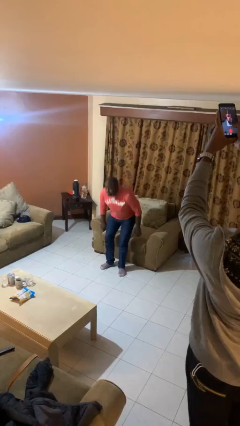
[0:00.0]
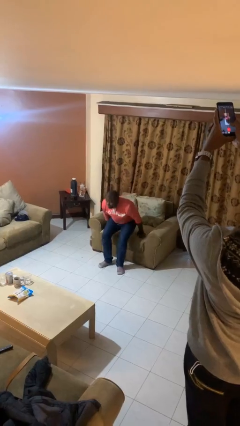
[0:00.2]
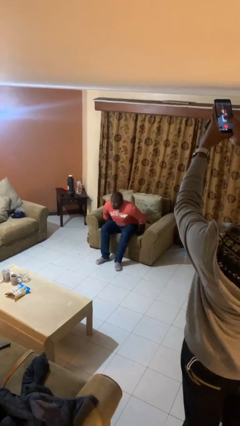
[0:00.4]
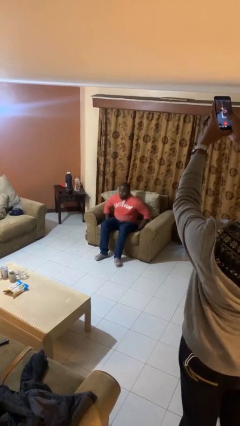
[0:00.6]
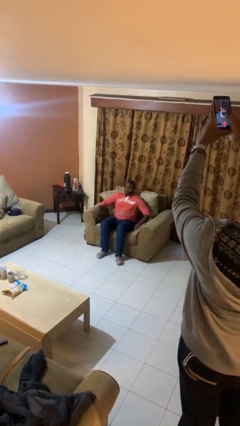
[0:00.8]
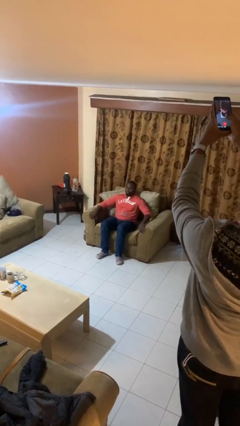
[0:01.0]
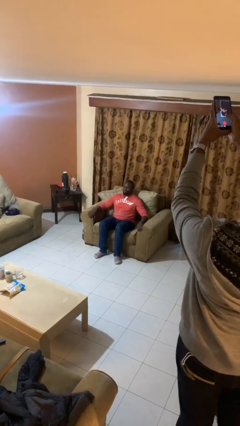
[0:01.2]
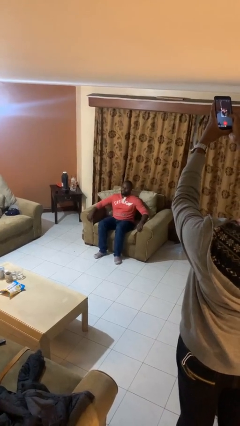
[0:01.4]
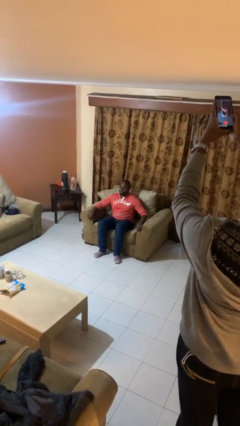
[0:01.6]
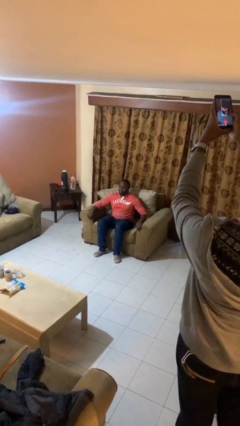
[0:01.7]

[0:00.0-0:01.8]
person sits down

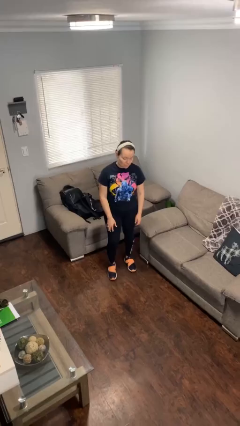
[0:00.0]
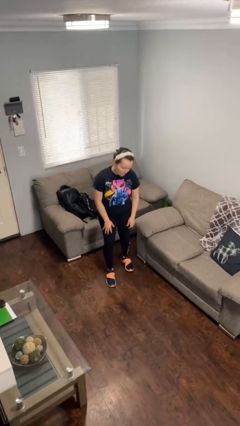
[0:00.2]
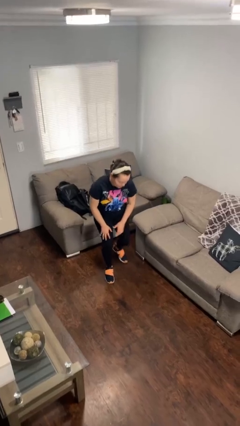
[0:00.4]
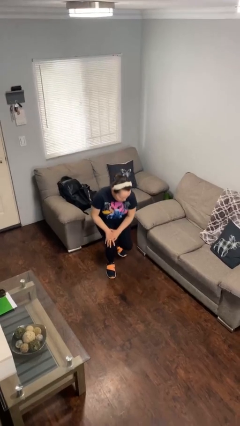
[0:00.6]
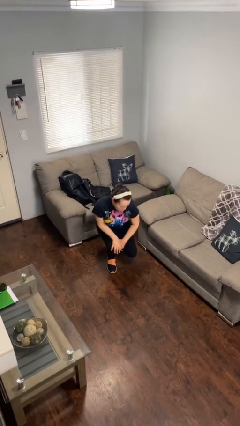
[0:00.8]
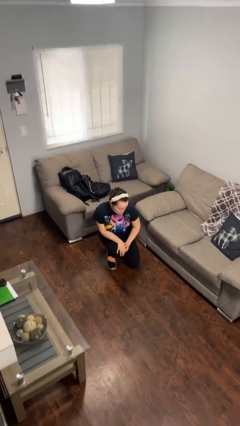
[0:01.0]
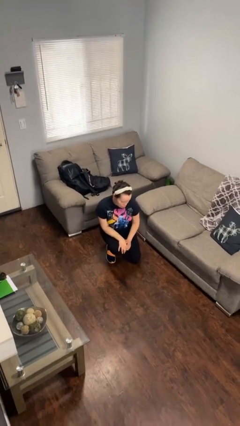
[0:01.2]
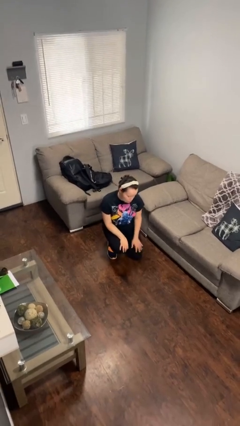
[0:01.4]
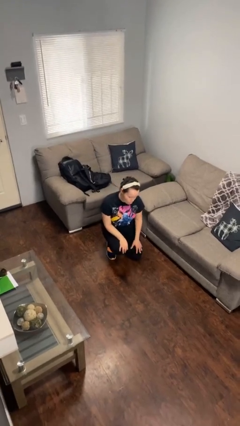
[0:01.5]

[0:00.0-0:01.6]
person kneels

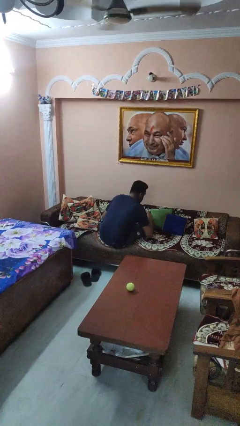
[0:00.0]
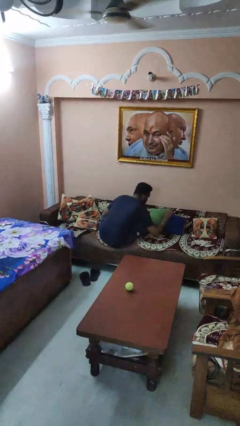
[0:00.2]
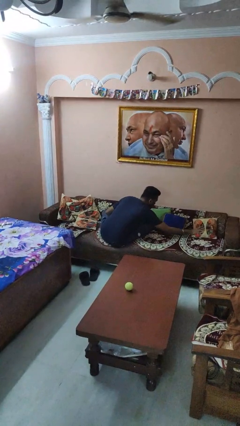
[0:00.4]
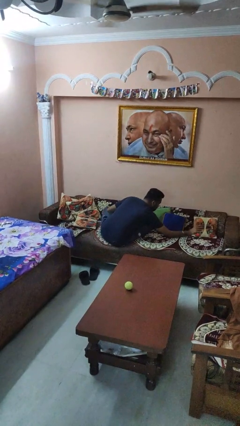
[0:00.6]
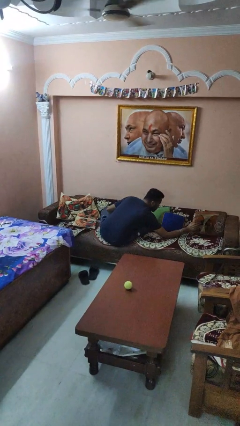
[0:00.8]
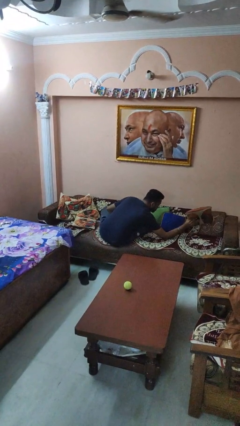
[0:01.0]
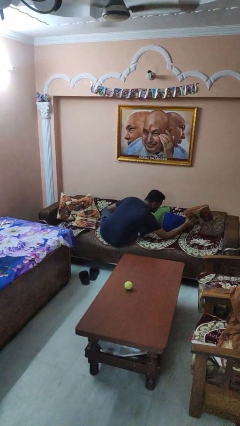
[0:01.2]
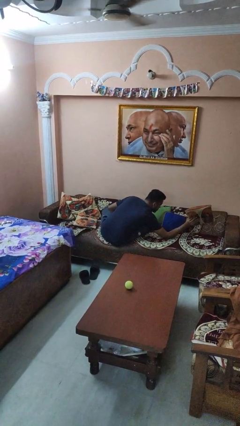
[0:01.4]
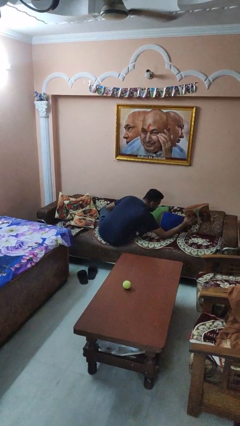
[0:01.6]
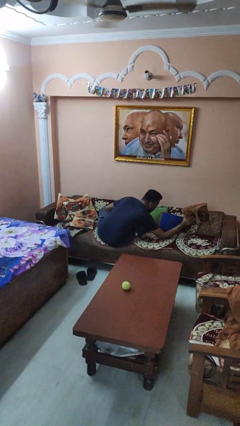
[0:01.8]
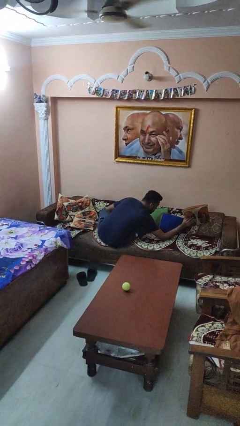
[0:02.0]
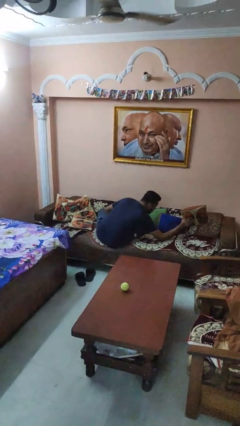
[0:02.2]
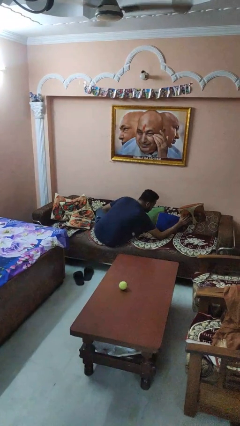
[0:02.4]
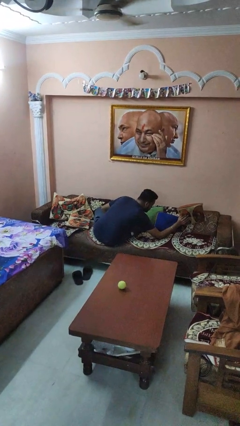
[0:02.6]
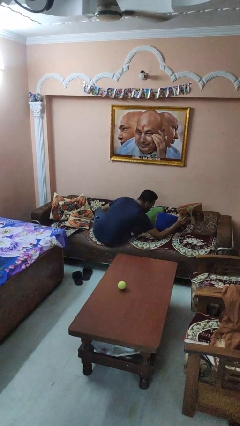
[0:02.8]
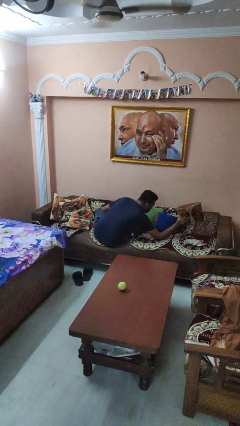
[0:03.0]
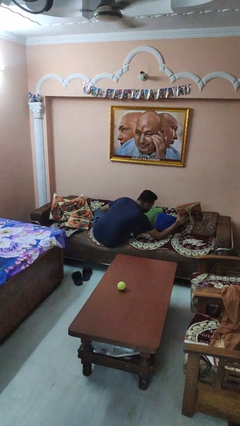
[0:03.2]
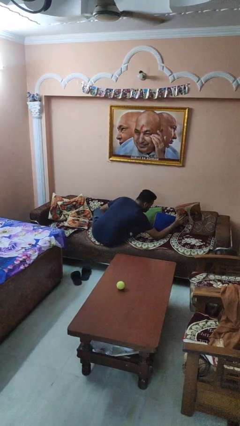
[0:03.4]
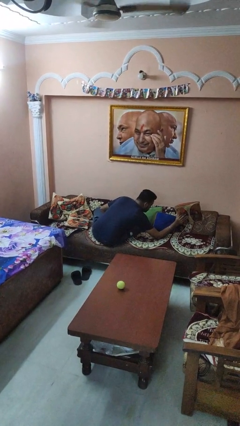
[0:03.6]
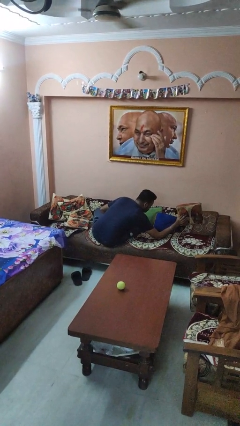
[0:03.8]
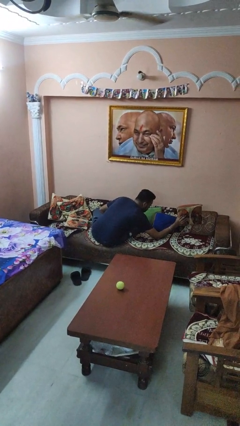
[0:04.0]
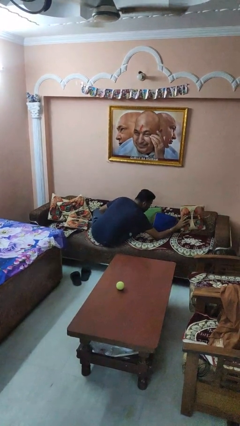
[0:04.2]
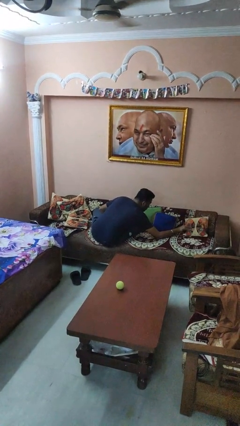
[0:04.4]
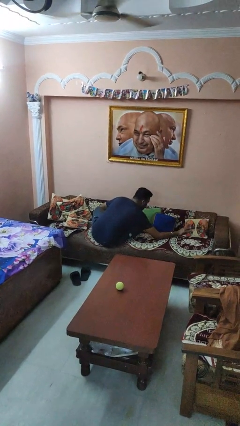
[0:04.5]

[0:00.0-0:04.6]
person searches in couch

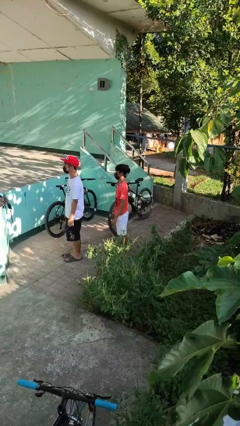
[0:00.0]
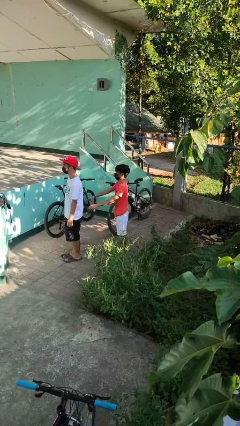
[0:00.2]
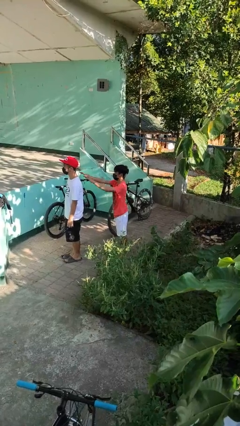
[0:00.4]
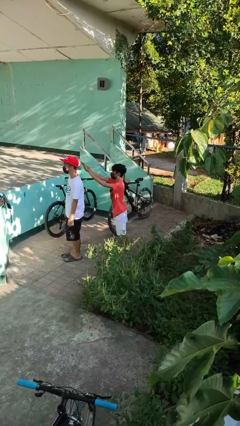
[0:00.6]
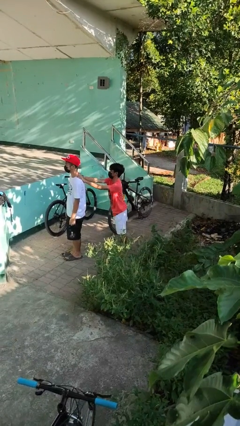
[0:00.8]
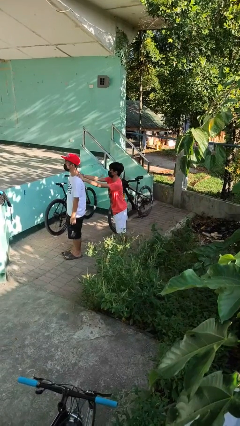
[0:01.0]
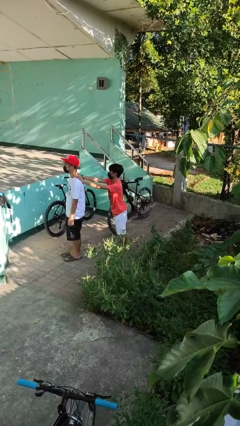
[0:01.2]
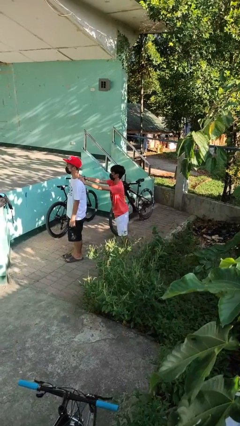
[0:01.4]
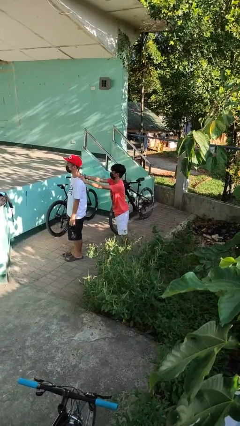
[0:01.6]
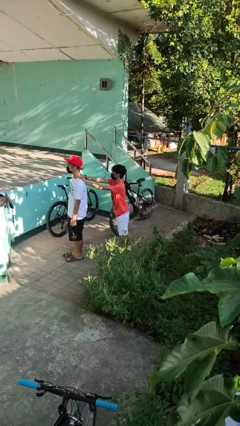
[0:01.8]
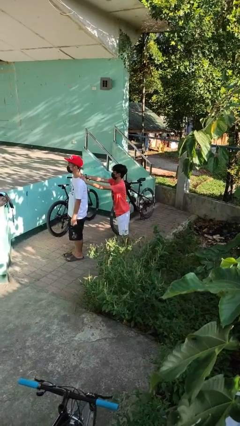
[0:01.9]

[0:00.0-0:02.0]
person grabs person by shoulder

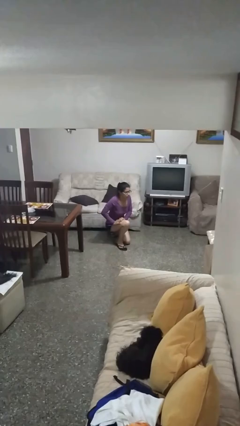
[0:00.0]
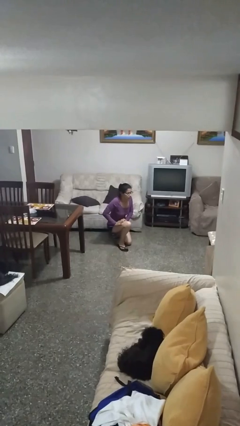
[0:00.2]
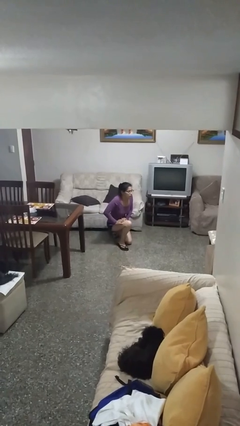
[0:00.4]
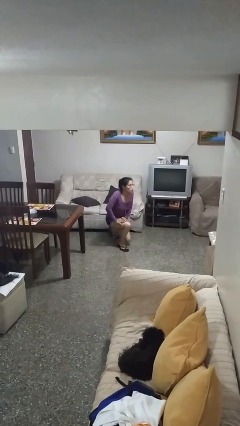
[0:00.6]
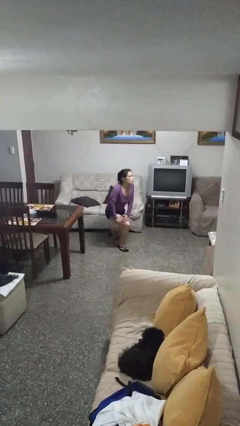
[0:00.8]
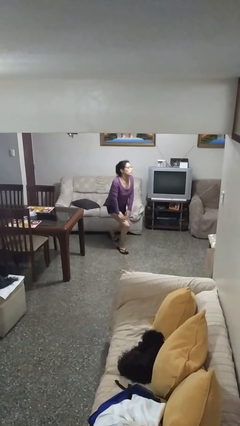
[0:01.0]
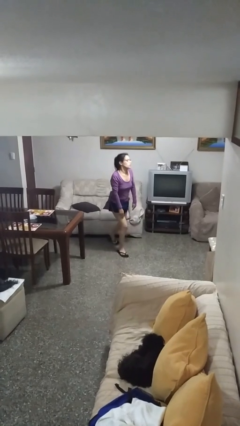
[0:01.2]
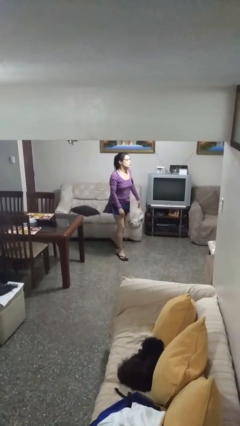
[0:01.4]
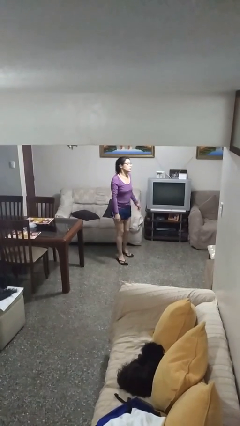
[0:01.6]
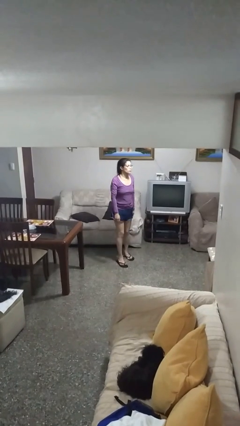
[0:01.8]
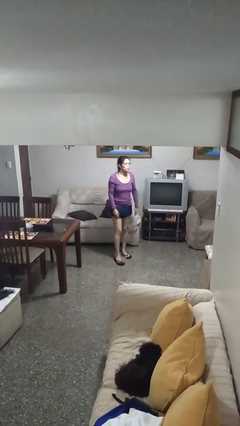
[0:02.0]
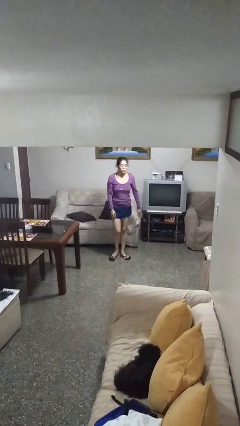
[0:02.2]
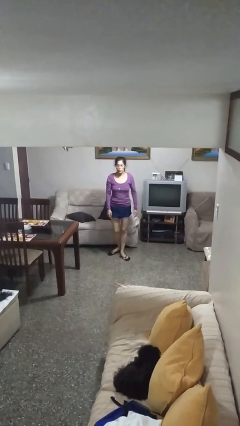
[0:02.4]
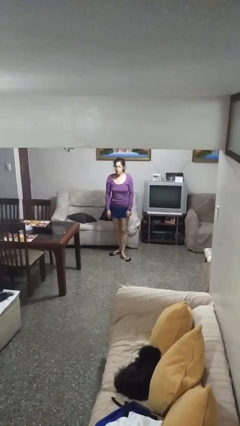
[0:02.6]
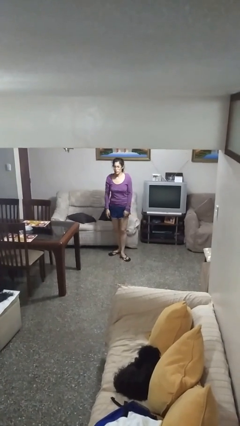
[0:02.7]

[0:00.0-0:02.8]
person stands up from floor

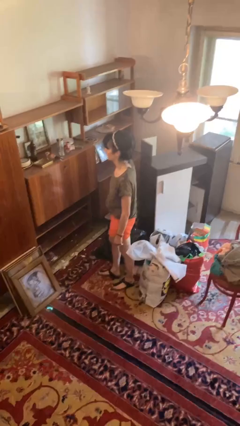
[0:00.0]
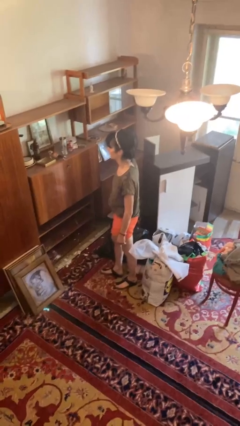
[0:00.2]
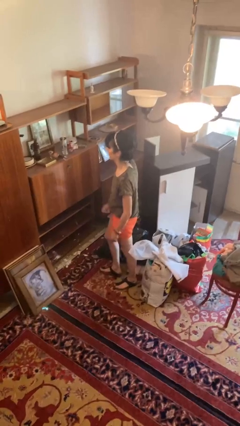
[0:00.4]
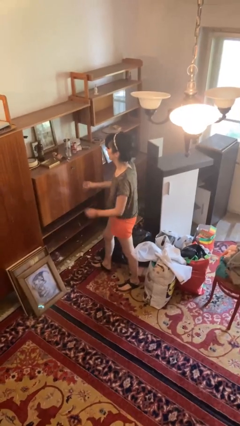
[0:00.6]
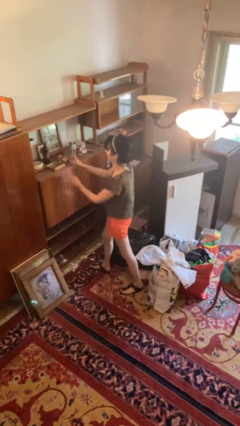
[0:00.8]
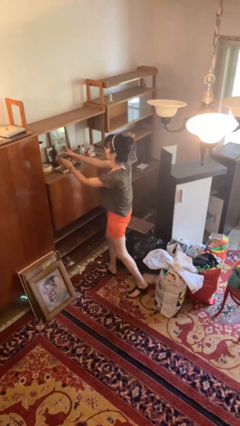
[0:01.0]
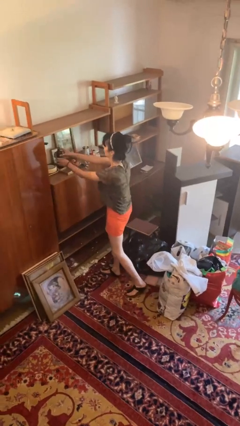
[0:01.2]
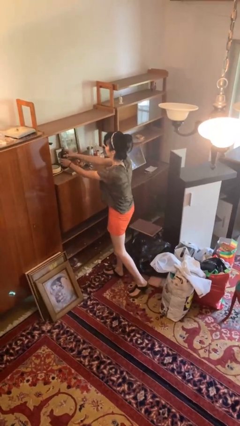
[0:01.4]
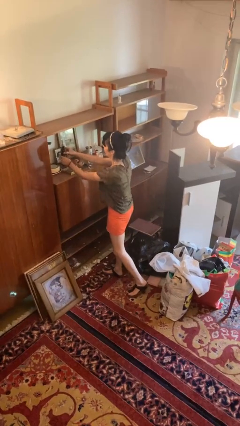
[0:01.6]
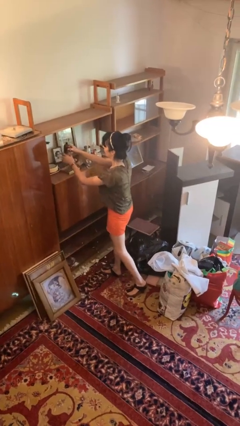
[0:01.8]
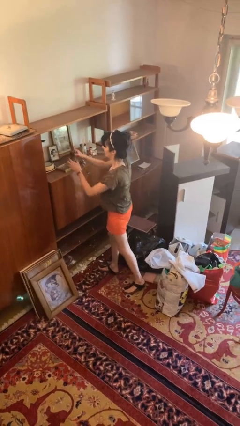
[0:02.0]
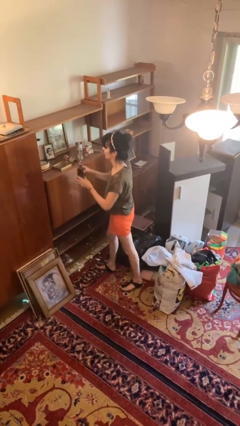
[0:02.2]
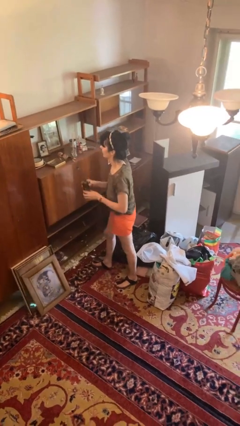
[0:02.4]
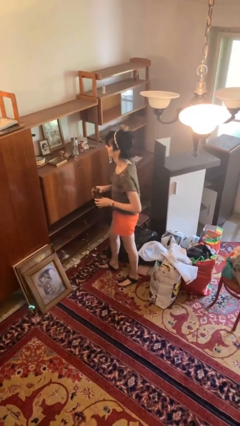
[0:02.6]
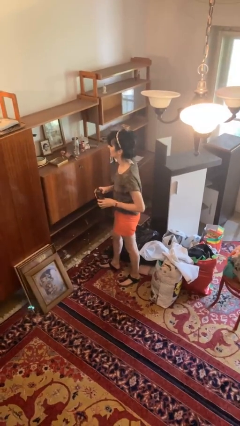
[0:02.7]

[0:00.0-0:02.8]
person picks up object from countertop

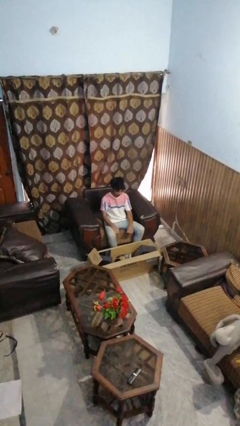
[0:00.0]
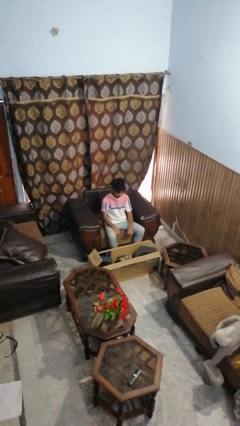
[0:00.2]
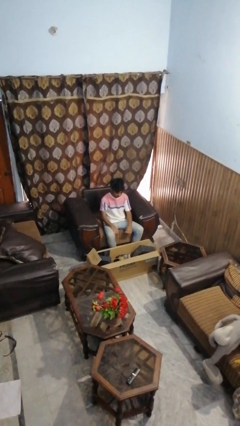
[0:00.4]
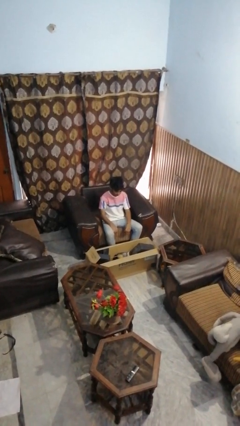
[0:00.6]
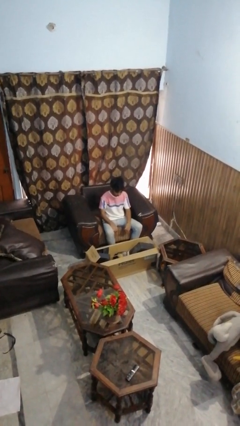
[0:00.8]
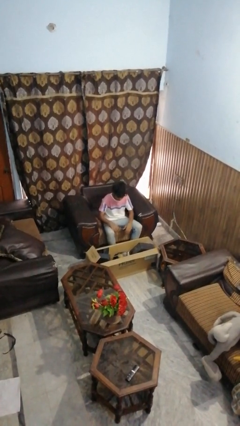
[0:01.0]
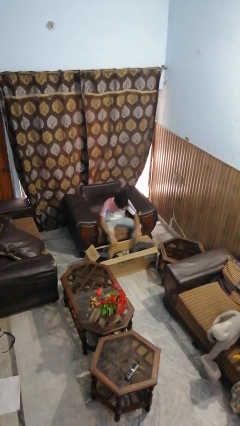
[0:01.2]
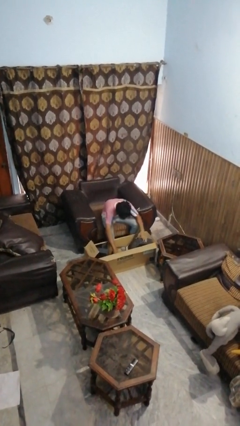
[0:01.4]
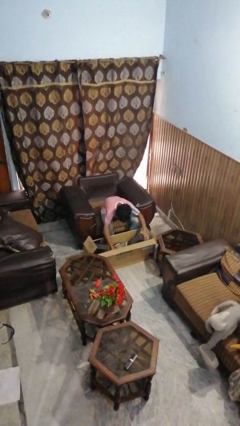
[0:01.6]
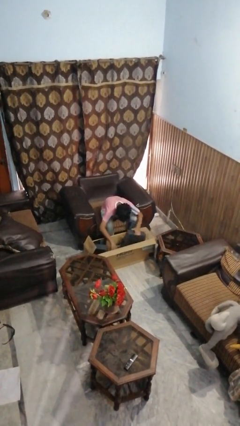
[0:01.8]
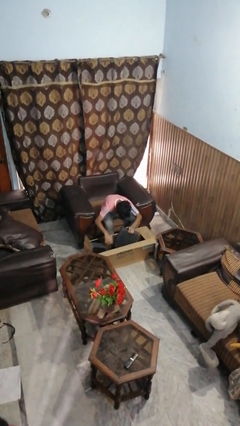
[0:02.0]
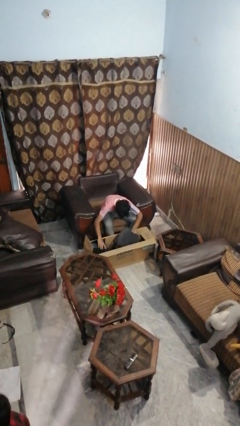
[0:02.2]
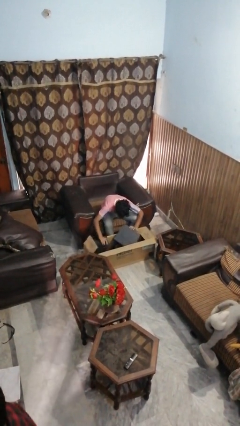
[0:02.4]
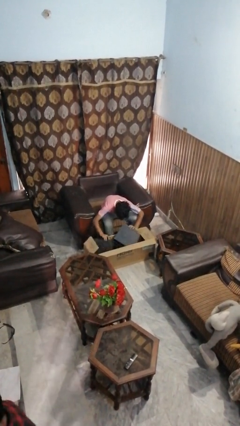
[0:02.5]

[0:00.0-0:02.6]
person searches in box
